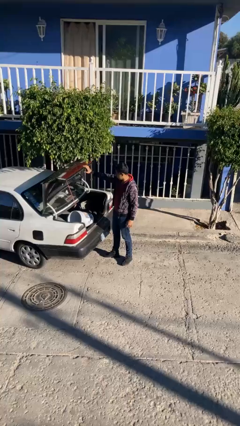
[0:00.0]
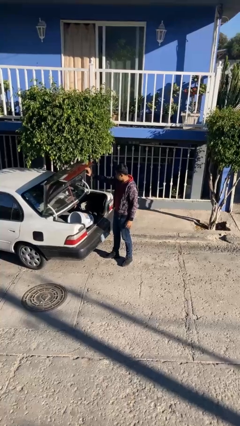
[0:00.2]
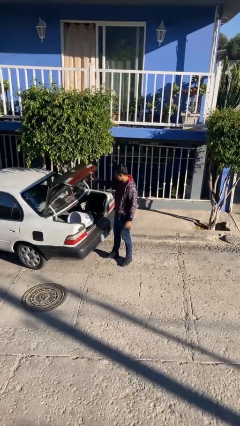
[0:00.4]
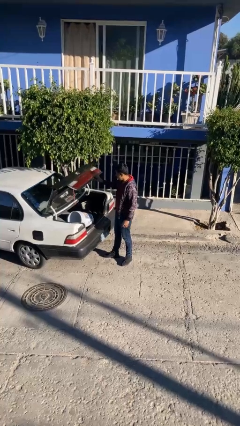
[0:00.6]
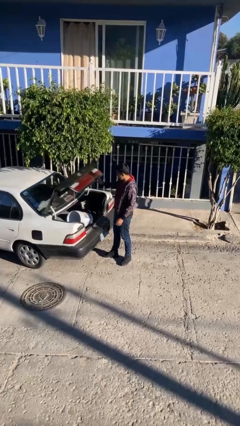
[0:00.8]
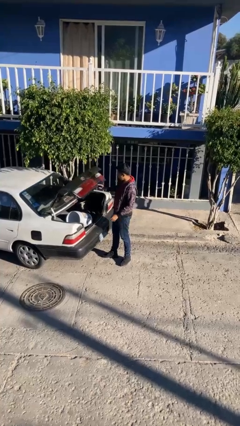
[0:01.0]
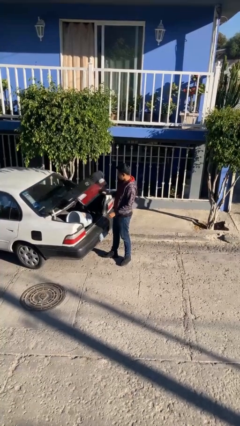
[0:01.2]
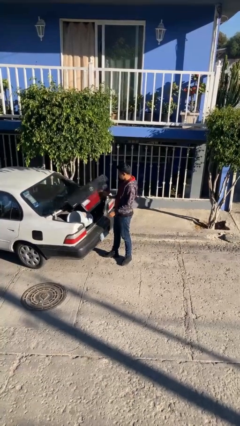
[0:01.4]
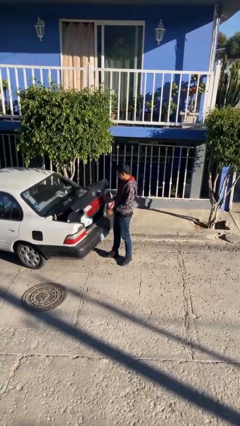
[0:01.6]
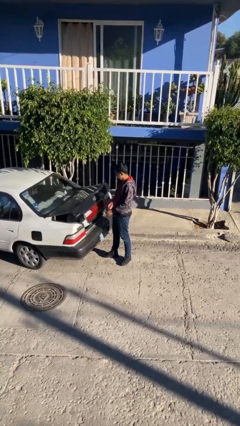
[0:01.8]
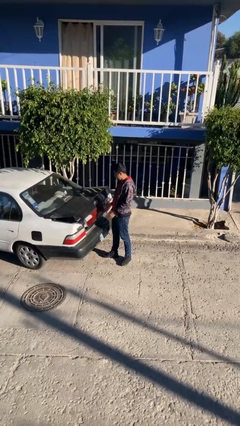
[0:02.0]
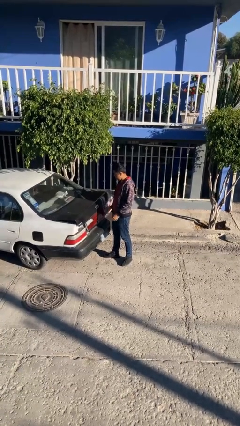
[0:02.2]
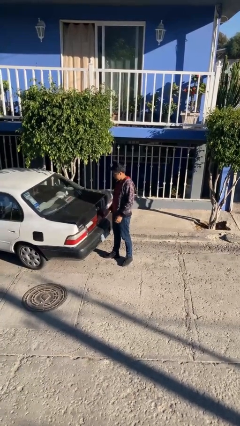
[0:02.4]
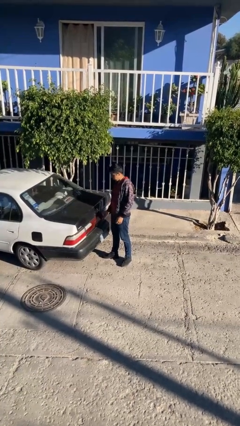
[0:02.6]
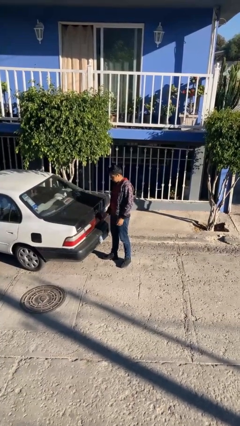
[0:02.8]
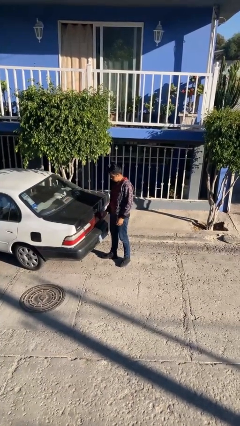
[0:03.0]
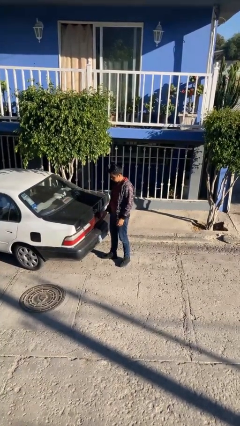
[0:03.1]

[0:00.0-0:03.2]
person closes car trunk

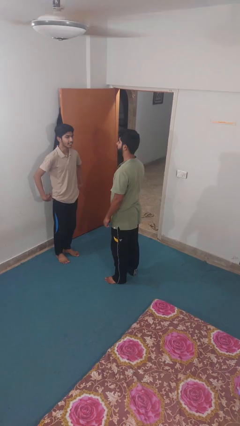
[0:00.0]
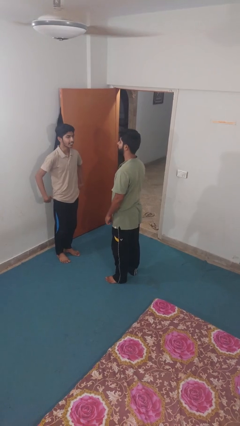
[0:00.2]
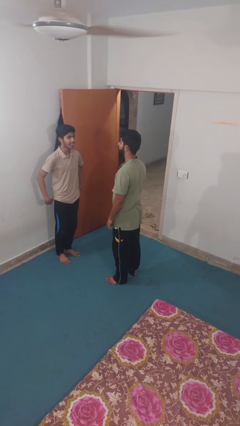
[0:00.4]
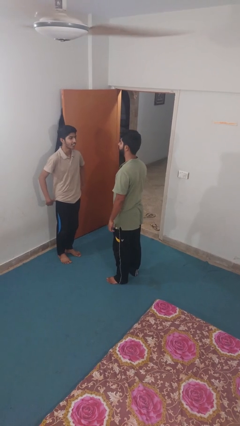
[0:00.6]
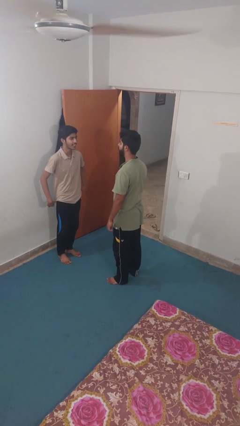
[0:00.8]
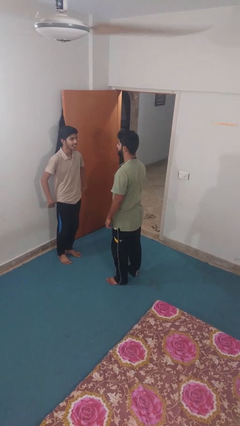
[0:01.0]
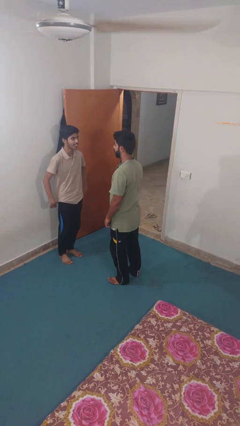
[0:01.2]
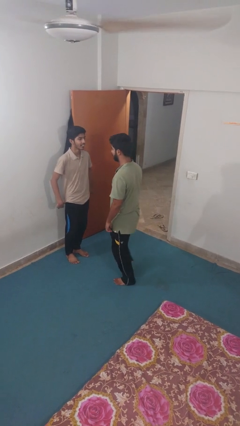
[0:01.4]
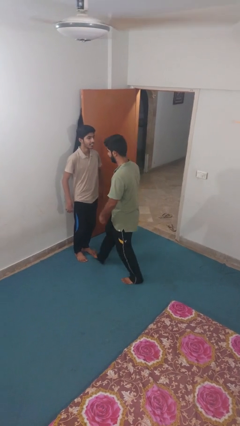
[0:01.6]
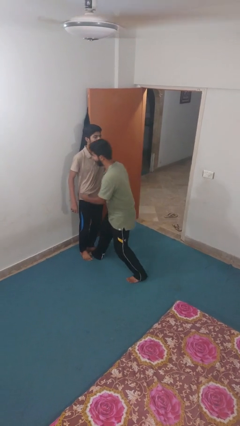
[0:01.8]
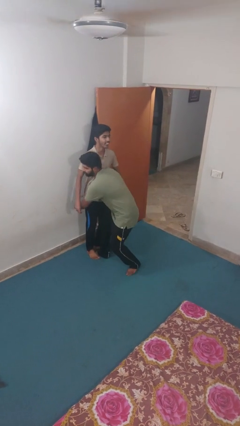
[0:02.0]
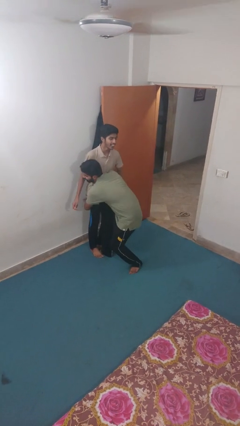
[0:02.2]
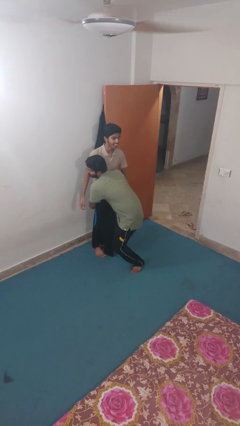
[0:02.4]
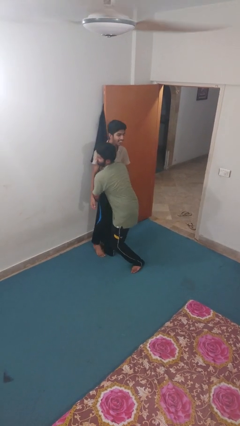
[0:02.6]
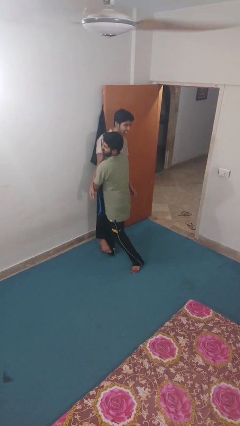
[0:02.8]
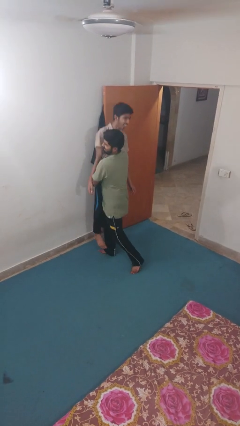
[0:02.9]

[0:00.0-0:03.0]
person picks up person

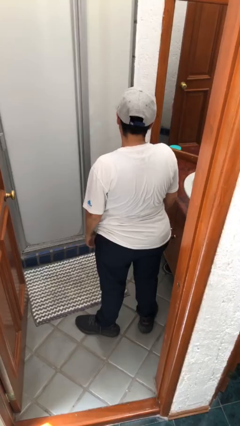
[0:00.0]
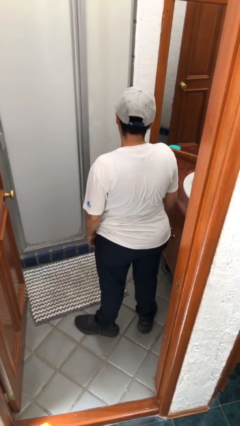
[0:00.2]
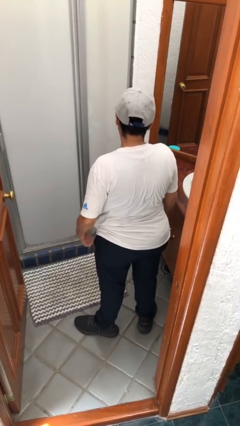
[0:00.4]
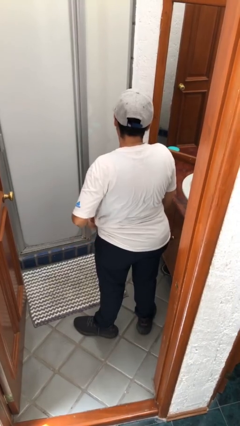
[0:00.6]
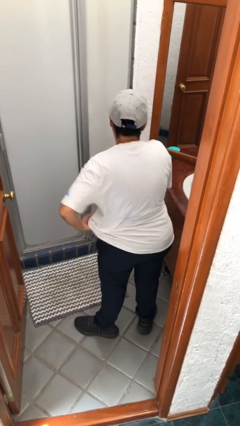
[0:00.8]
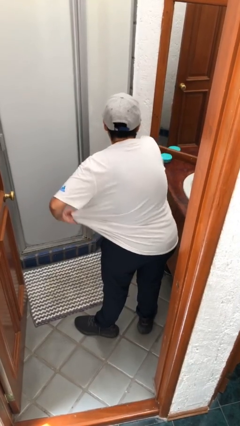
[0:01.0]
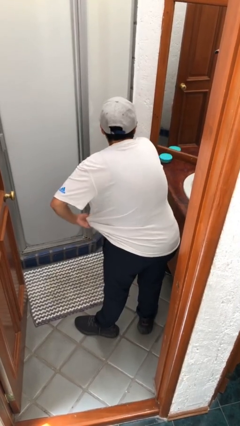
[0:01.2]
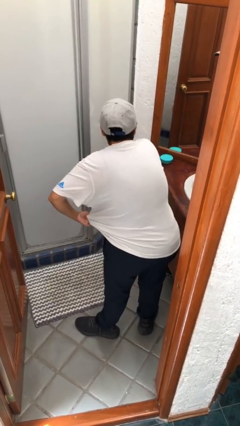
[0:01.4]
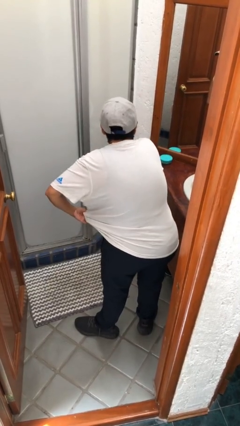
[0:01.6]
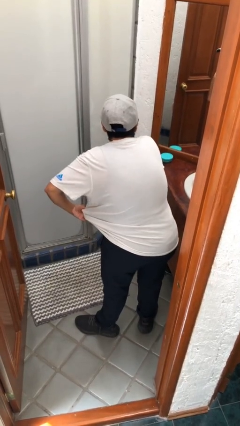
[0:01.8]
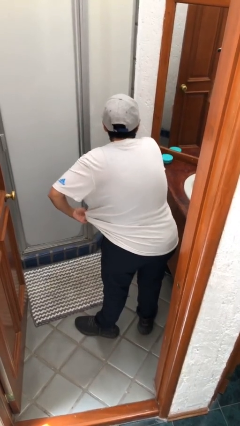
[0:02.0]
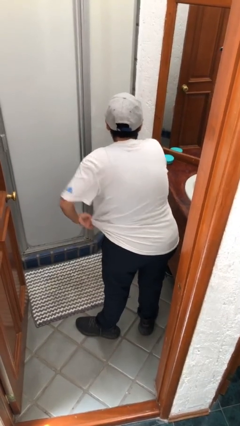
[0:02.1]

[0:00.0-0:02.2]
person applies deodorant

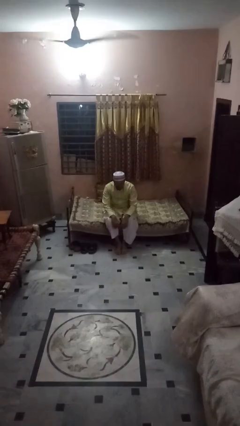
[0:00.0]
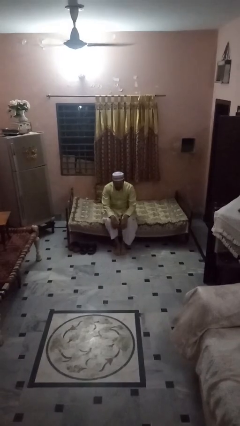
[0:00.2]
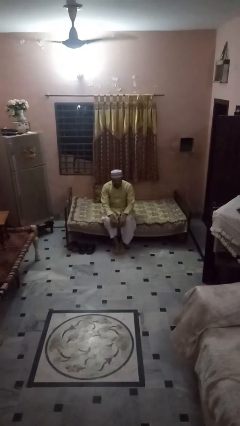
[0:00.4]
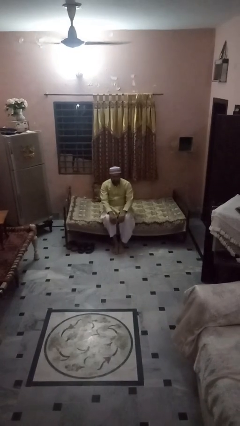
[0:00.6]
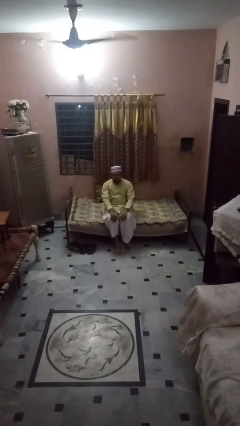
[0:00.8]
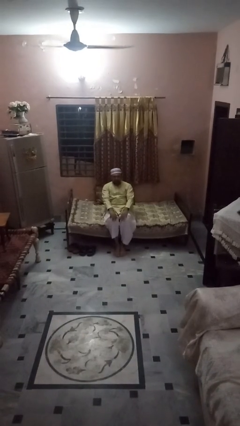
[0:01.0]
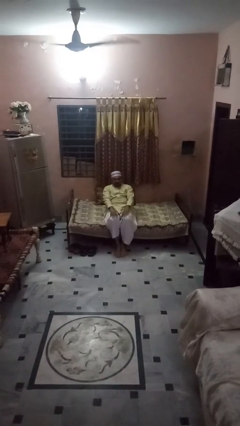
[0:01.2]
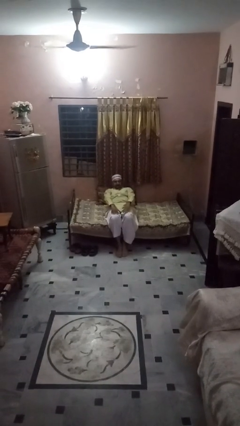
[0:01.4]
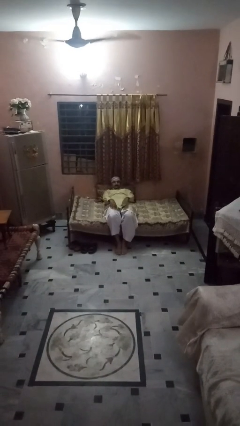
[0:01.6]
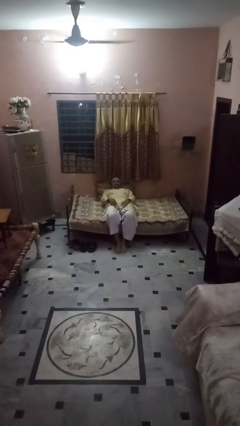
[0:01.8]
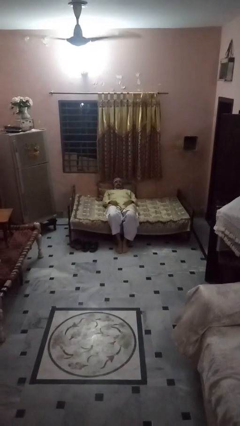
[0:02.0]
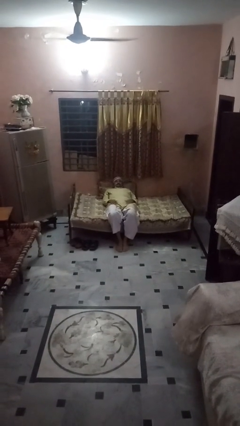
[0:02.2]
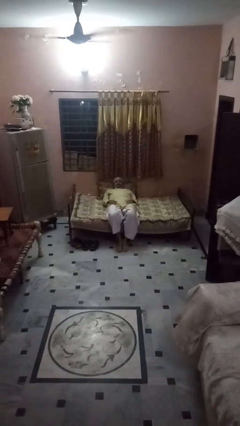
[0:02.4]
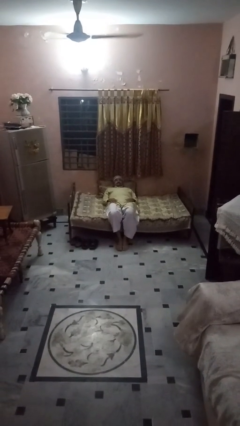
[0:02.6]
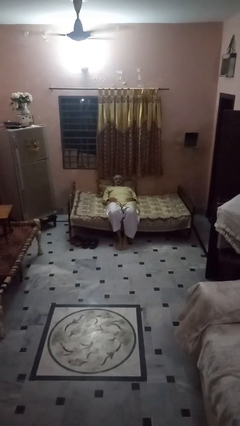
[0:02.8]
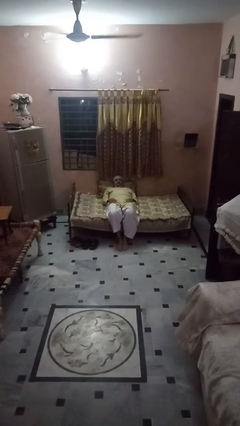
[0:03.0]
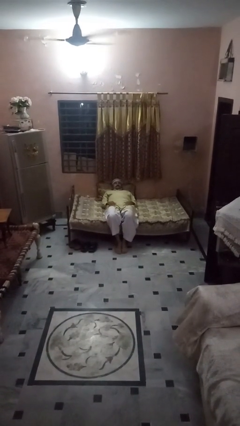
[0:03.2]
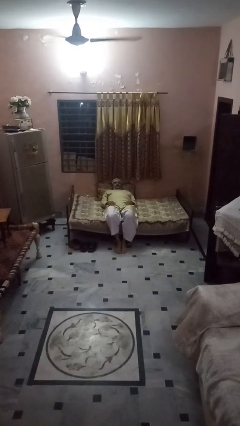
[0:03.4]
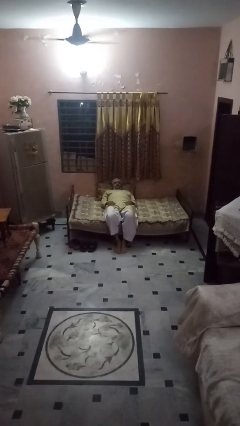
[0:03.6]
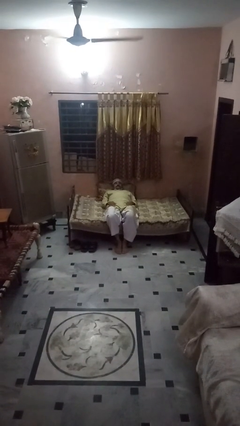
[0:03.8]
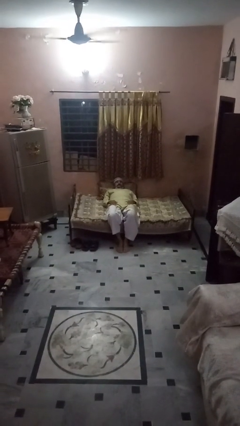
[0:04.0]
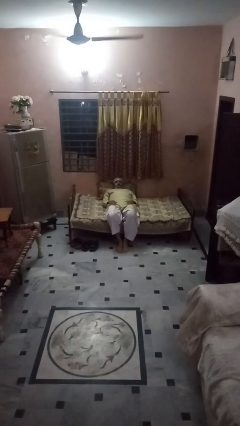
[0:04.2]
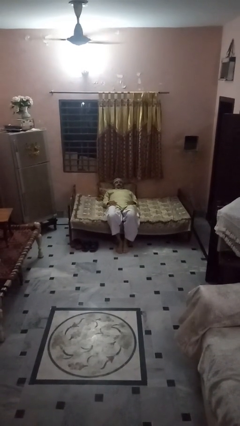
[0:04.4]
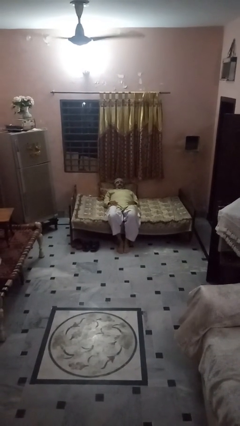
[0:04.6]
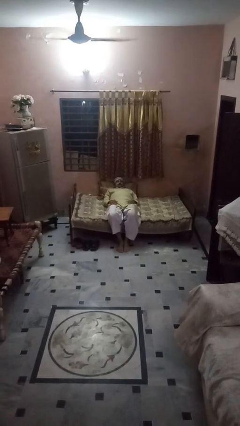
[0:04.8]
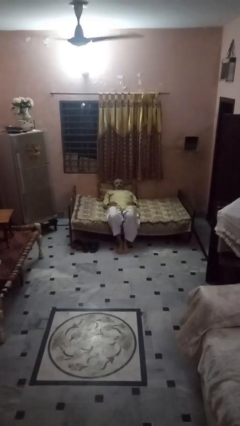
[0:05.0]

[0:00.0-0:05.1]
person lies down on bed

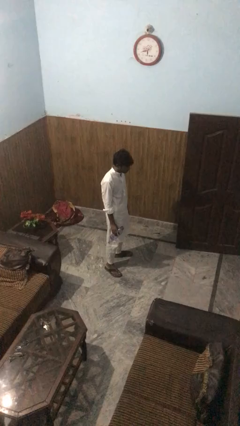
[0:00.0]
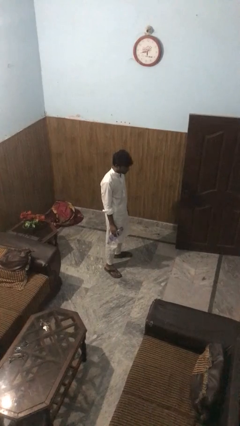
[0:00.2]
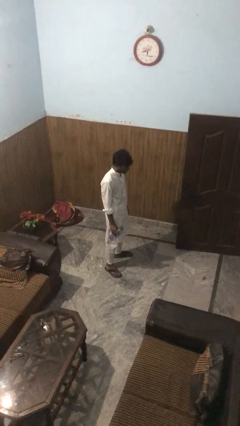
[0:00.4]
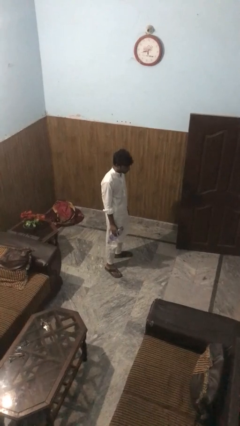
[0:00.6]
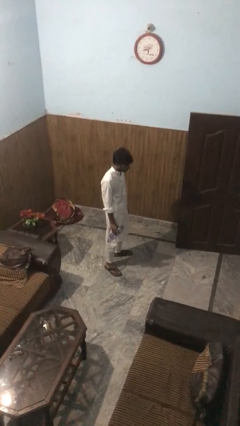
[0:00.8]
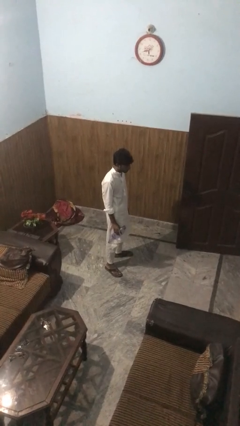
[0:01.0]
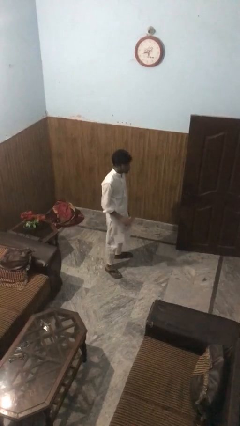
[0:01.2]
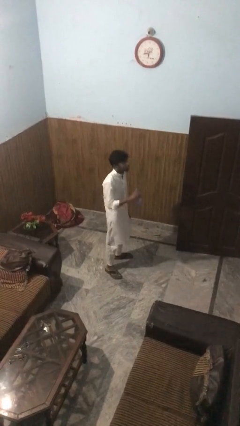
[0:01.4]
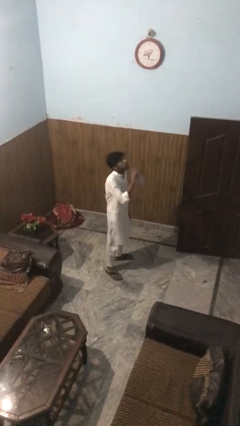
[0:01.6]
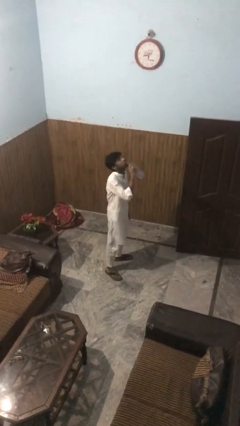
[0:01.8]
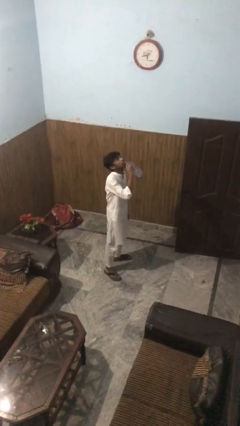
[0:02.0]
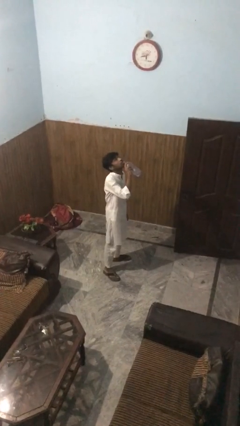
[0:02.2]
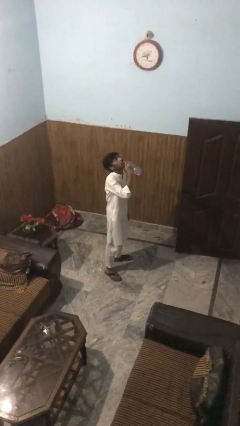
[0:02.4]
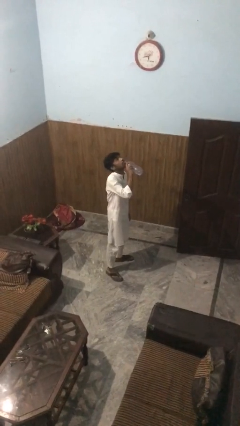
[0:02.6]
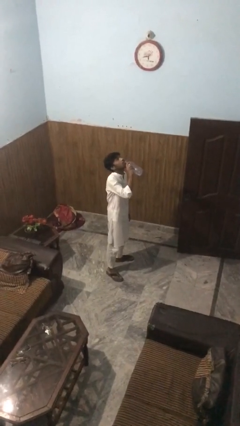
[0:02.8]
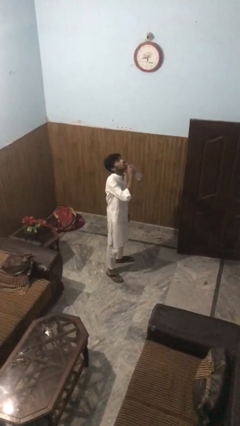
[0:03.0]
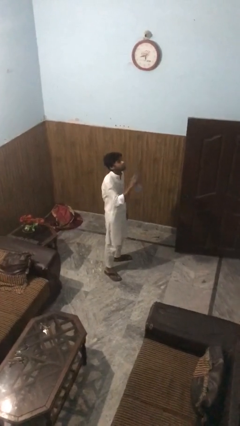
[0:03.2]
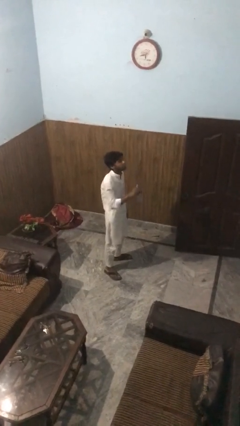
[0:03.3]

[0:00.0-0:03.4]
person drinks from bottle

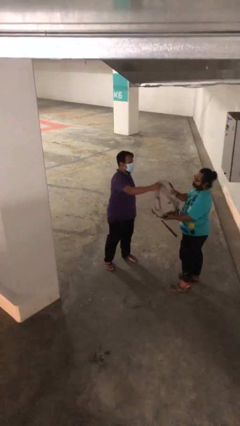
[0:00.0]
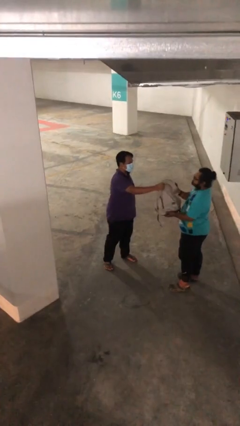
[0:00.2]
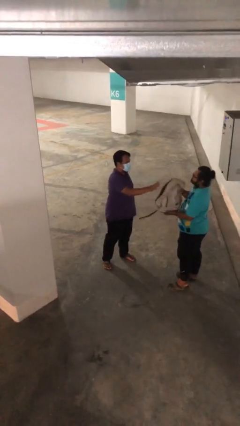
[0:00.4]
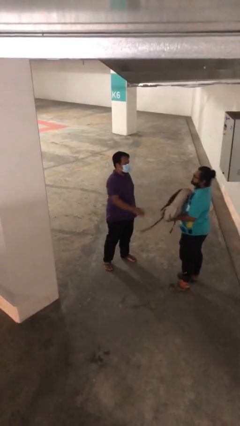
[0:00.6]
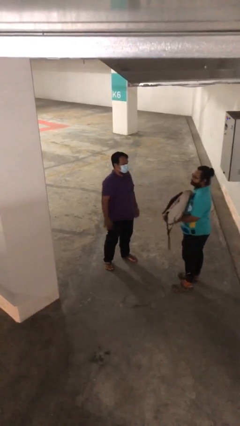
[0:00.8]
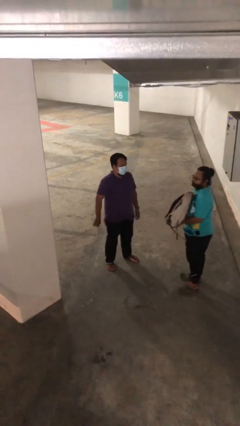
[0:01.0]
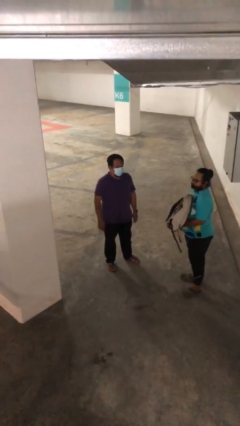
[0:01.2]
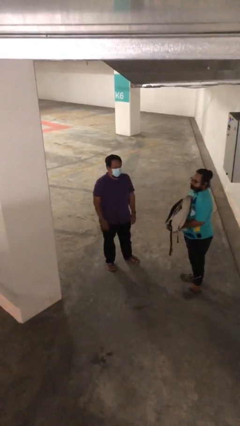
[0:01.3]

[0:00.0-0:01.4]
person transfers object to person
